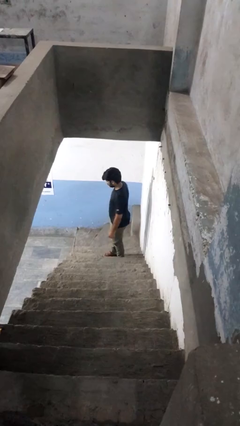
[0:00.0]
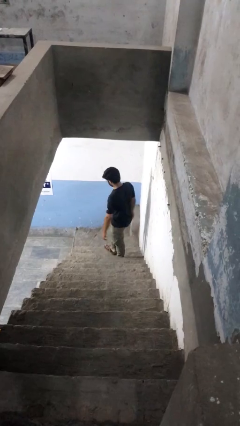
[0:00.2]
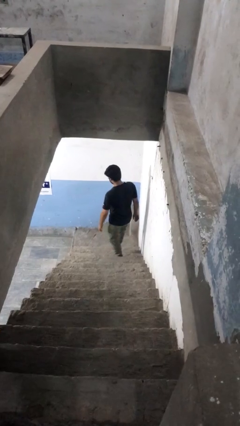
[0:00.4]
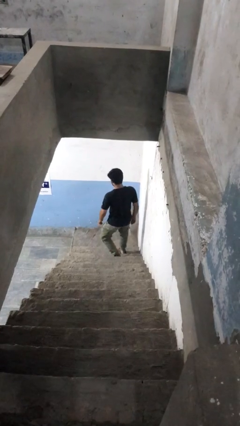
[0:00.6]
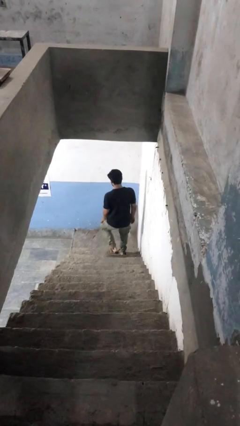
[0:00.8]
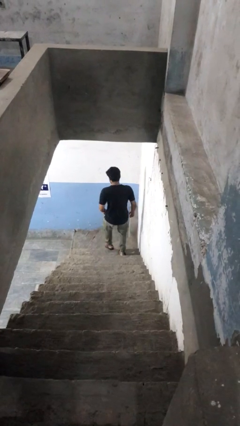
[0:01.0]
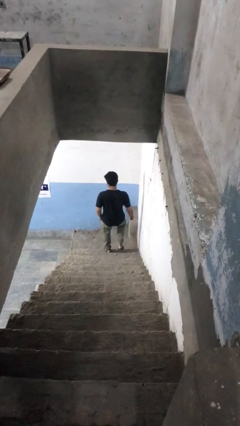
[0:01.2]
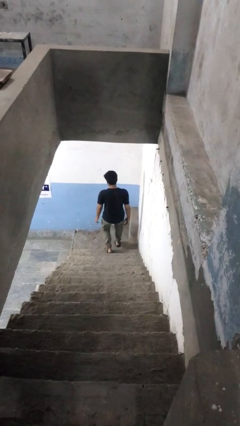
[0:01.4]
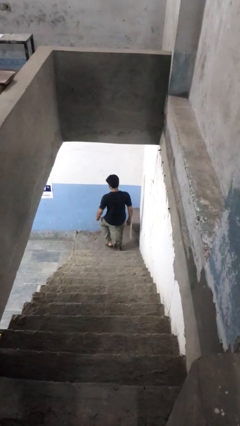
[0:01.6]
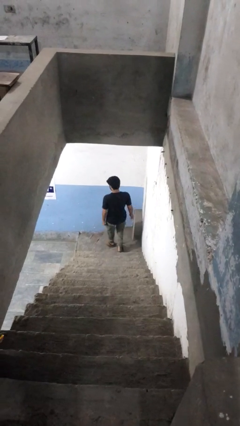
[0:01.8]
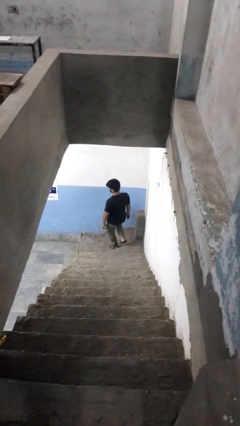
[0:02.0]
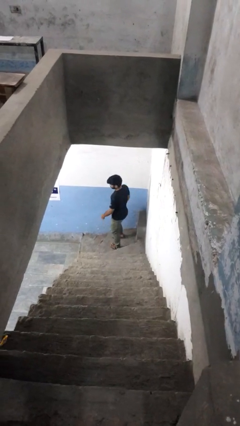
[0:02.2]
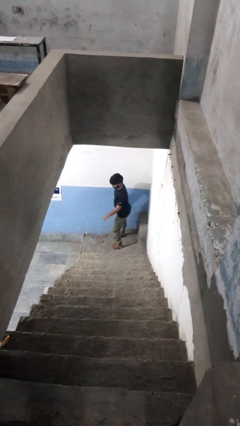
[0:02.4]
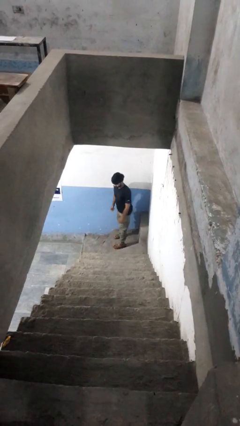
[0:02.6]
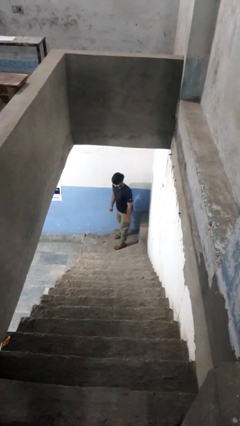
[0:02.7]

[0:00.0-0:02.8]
person climbs down stairs

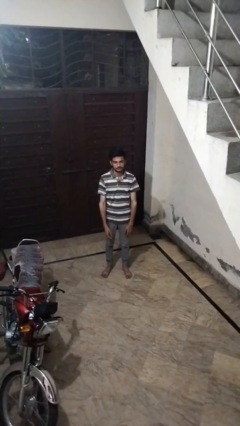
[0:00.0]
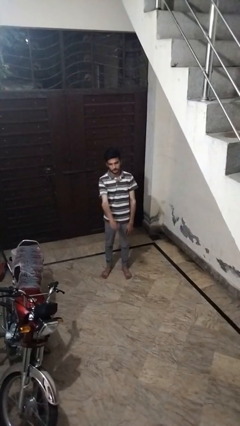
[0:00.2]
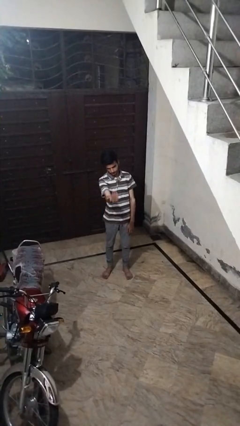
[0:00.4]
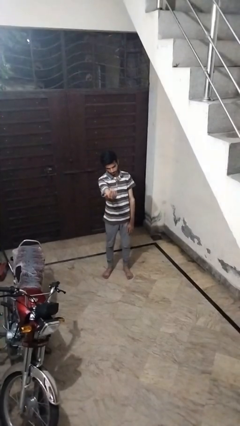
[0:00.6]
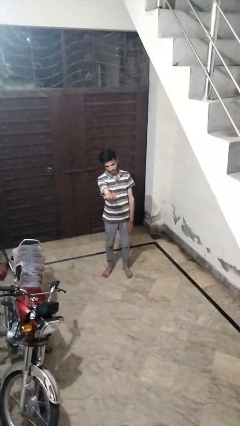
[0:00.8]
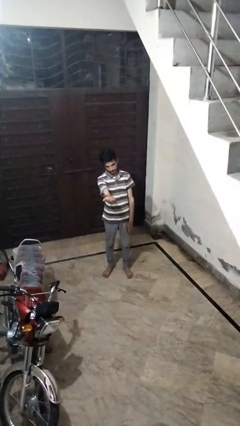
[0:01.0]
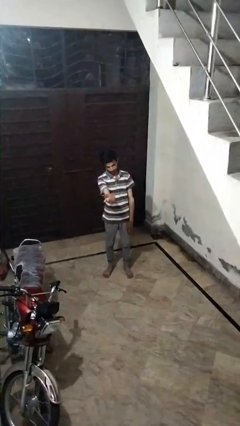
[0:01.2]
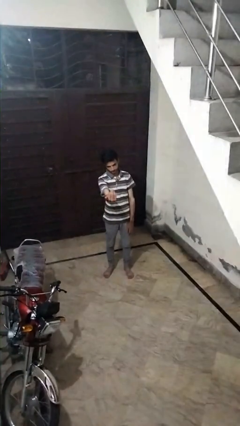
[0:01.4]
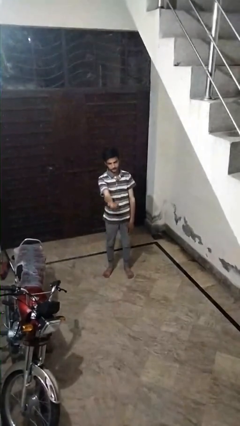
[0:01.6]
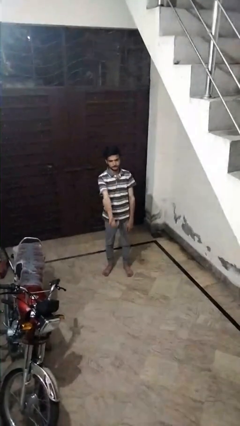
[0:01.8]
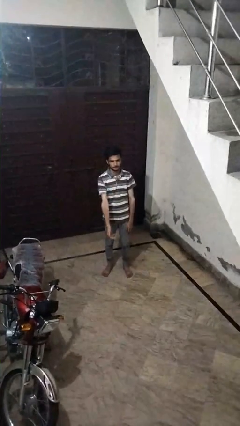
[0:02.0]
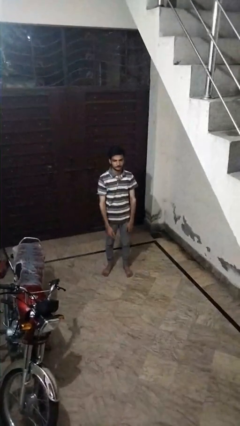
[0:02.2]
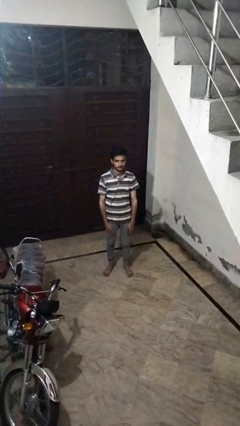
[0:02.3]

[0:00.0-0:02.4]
person gestures come here

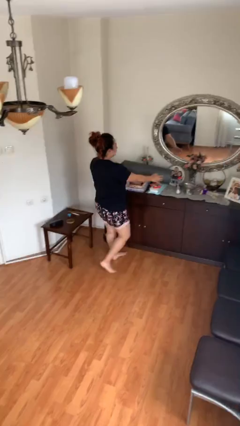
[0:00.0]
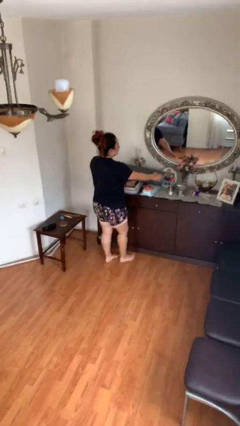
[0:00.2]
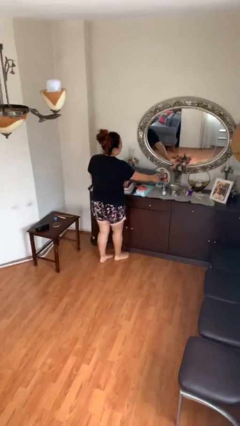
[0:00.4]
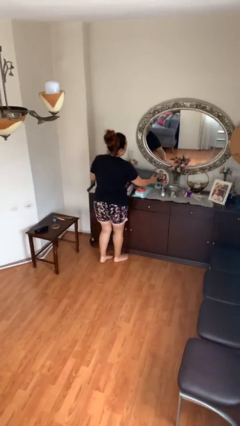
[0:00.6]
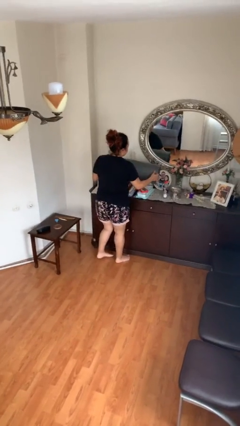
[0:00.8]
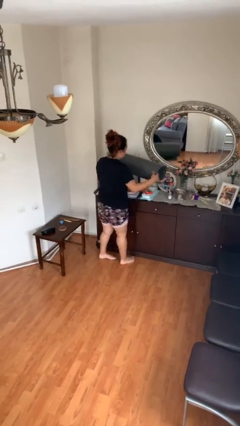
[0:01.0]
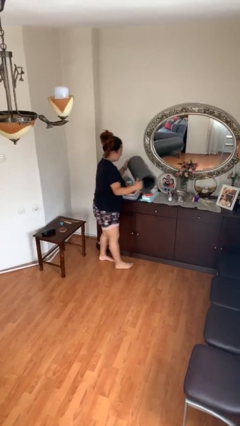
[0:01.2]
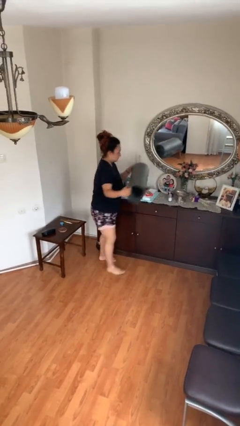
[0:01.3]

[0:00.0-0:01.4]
person picks up object from table

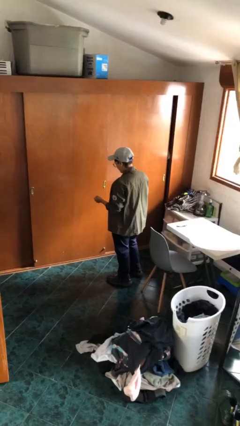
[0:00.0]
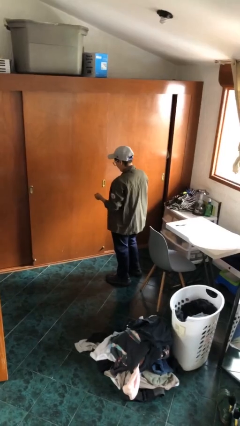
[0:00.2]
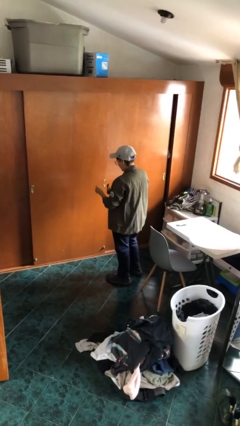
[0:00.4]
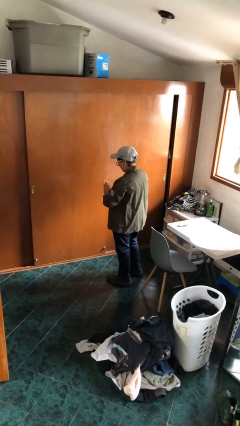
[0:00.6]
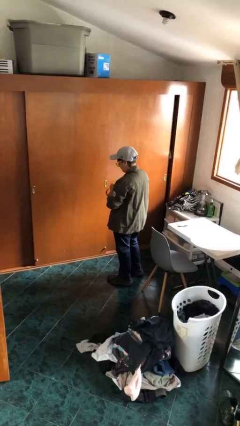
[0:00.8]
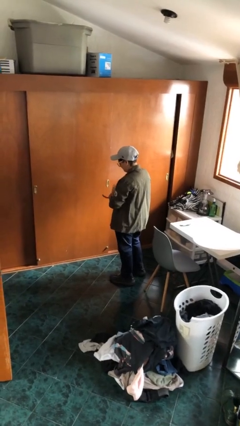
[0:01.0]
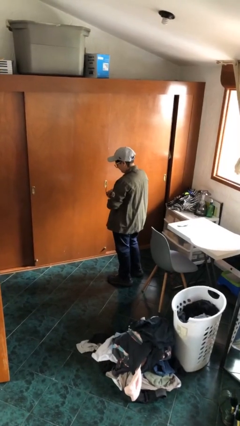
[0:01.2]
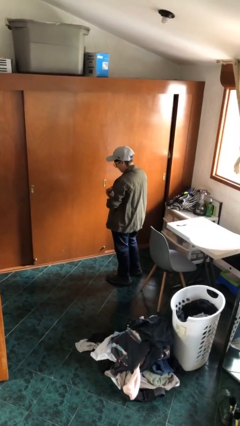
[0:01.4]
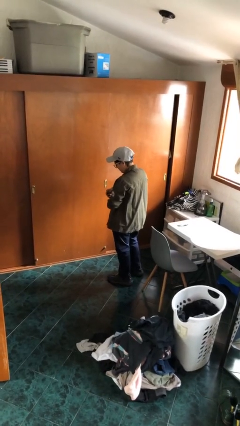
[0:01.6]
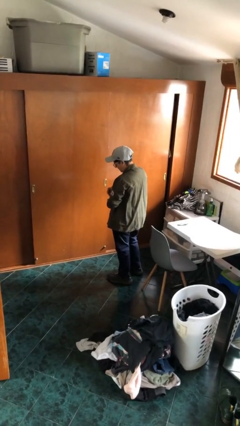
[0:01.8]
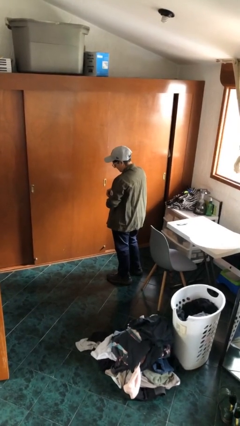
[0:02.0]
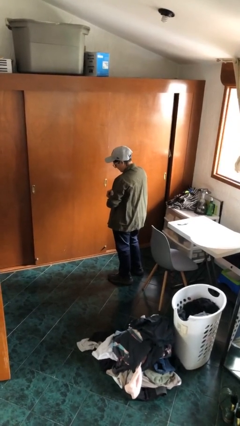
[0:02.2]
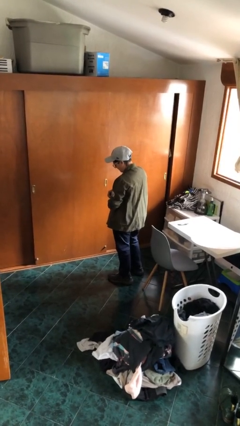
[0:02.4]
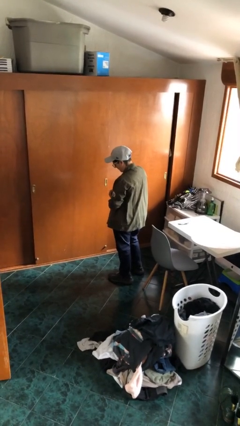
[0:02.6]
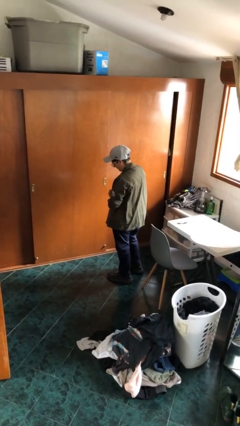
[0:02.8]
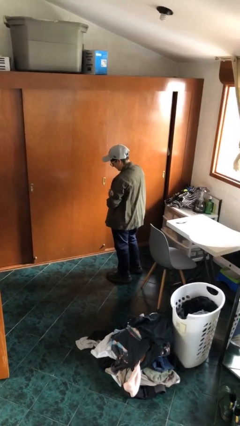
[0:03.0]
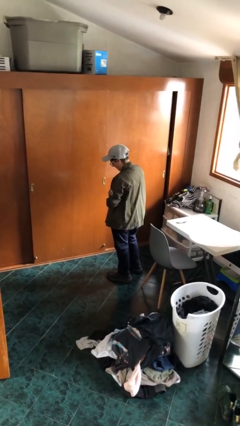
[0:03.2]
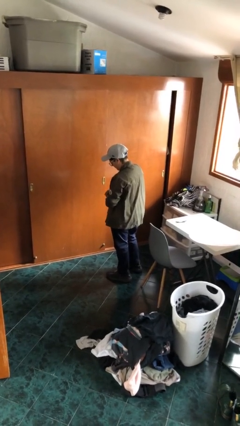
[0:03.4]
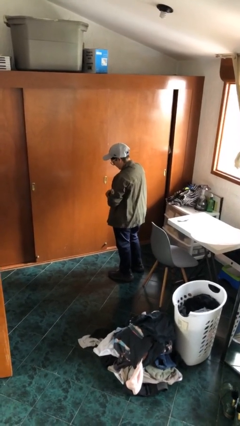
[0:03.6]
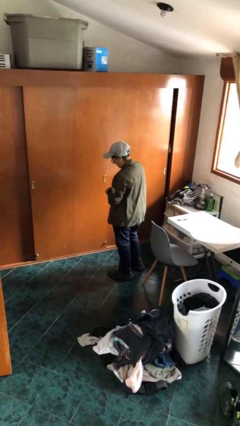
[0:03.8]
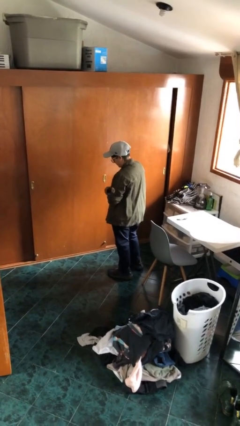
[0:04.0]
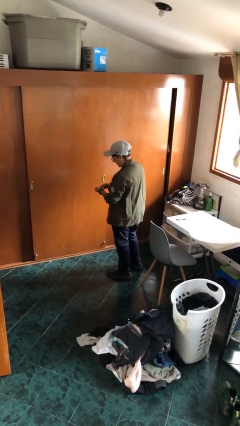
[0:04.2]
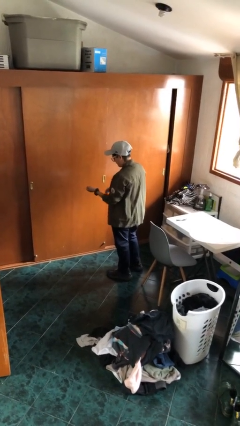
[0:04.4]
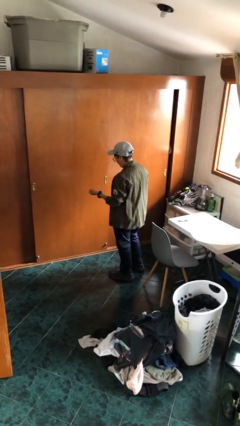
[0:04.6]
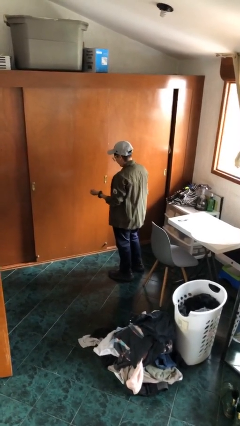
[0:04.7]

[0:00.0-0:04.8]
person puts on wristwatch

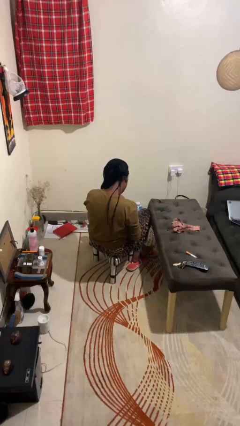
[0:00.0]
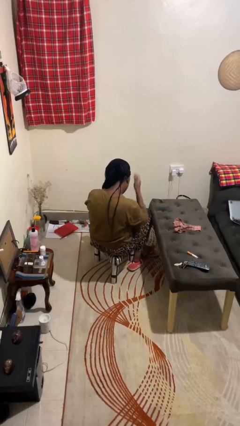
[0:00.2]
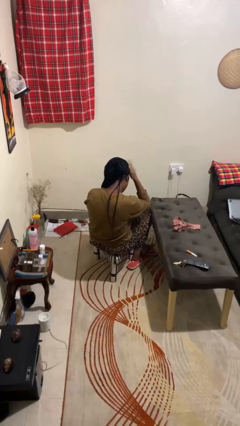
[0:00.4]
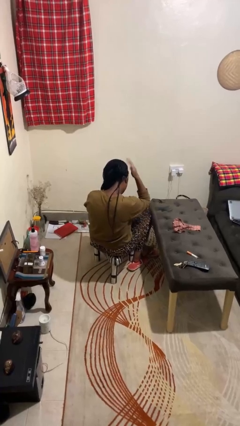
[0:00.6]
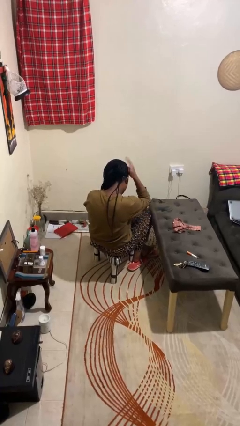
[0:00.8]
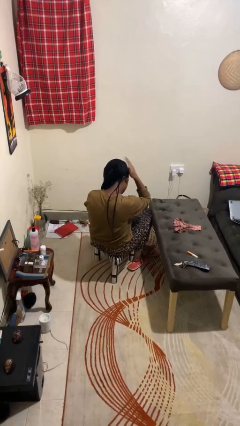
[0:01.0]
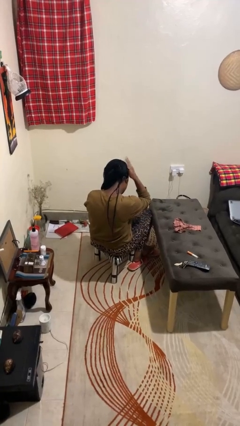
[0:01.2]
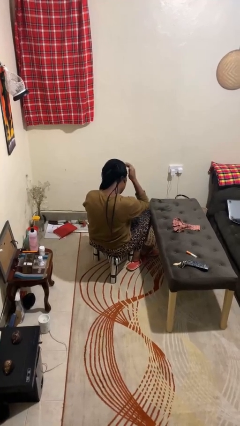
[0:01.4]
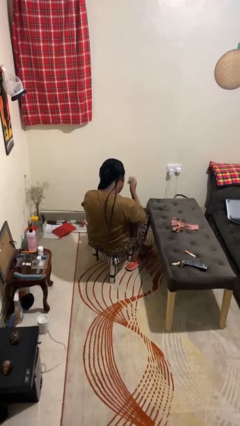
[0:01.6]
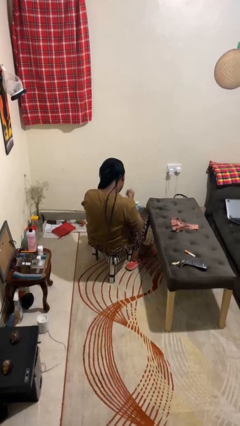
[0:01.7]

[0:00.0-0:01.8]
person pats head

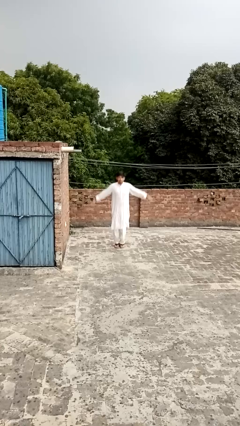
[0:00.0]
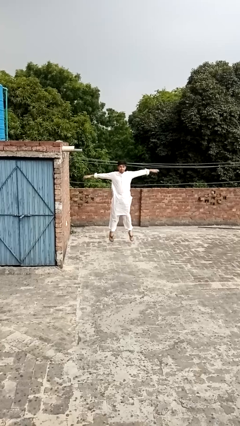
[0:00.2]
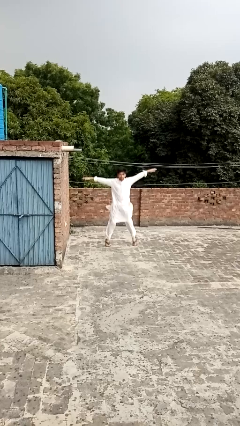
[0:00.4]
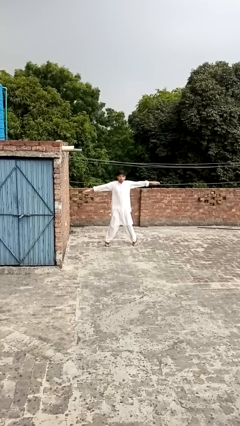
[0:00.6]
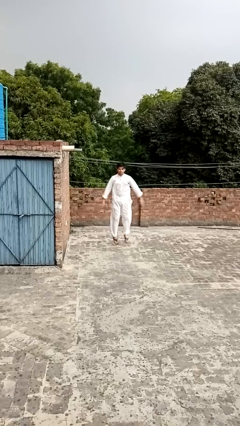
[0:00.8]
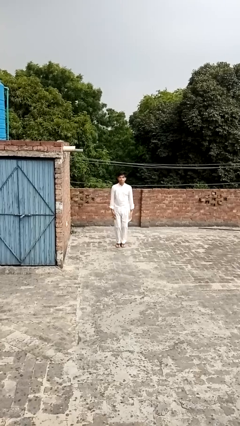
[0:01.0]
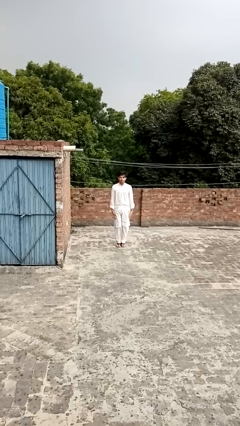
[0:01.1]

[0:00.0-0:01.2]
person exercises with jumping jacks

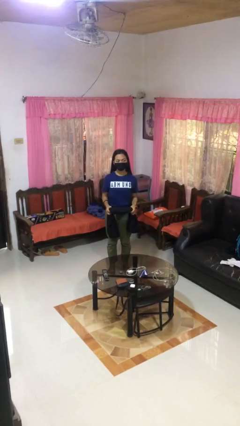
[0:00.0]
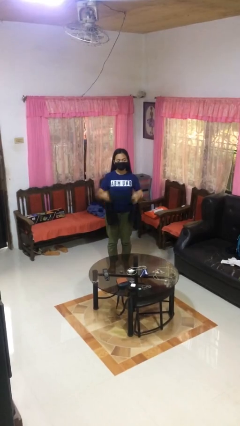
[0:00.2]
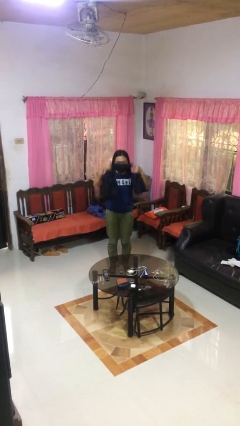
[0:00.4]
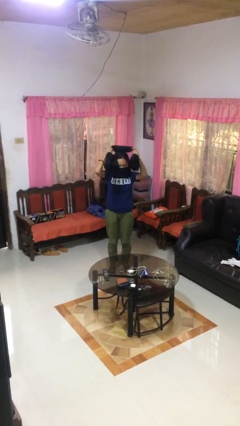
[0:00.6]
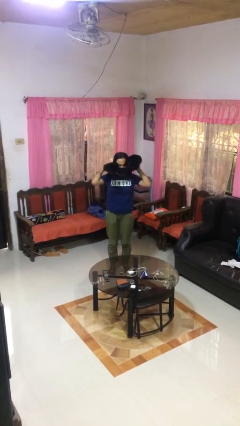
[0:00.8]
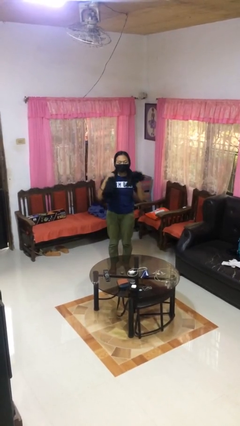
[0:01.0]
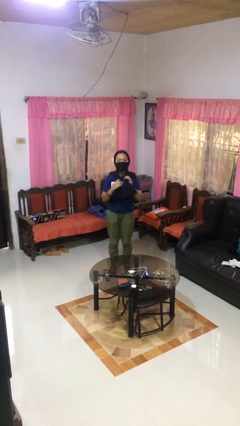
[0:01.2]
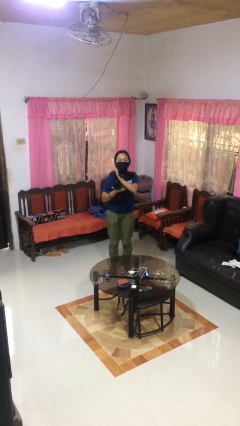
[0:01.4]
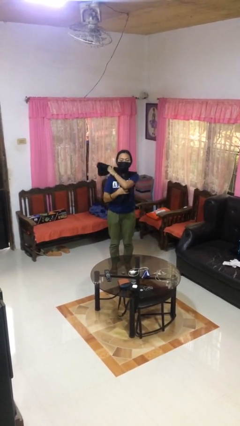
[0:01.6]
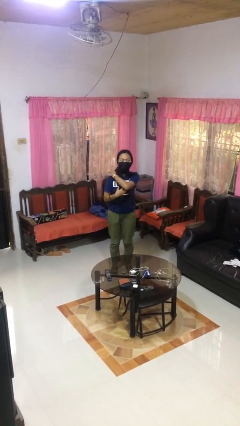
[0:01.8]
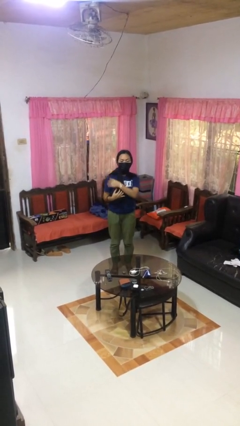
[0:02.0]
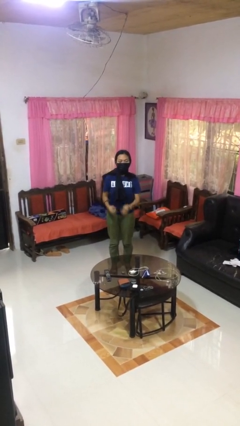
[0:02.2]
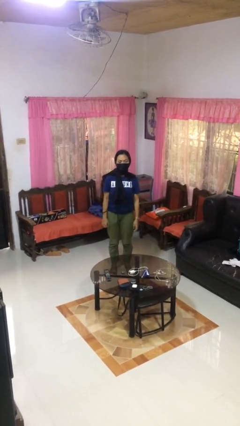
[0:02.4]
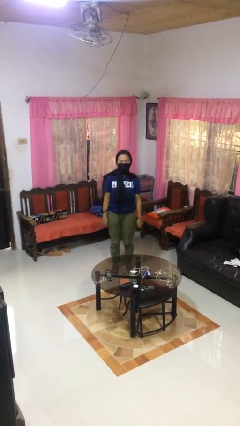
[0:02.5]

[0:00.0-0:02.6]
person puts on scarf

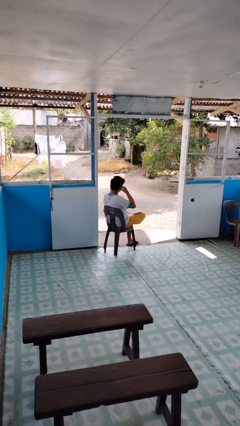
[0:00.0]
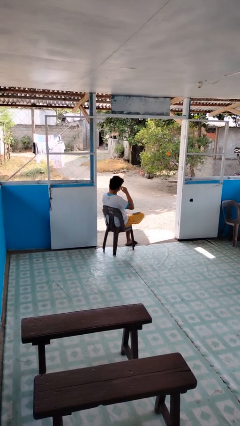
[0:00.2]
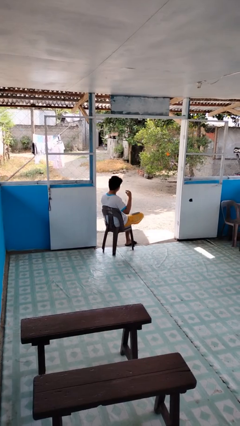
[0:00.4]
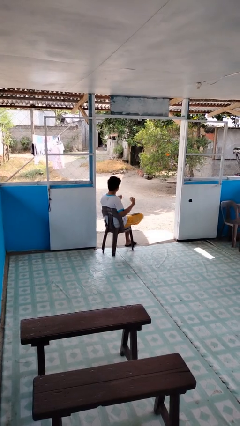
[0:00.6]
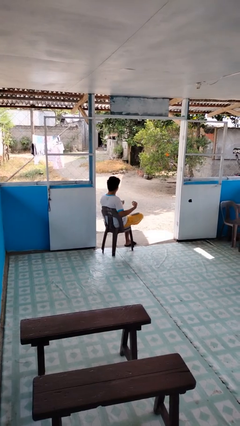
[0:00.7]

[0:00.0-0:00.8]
person takes off headphones
